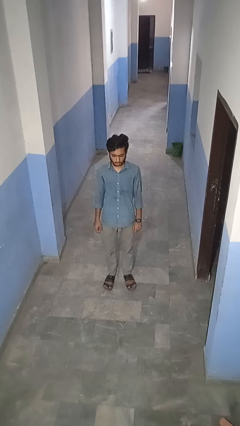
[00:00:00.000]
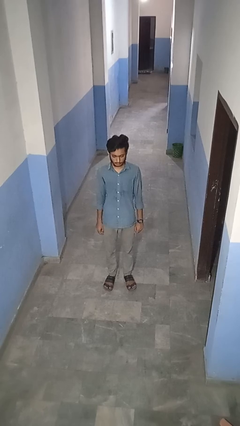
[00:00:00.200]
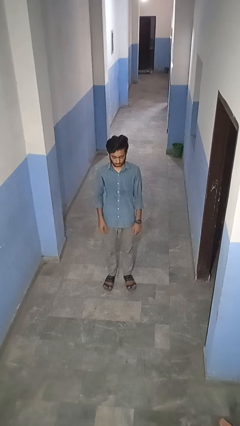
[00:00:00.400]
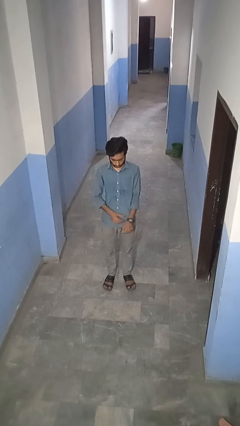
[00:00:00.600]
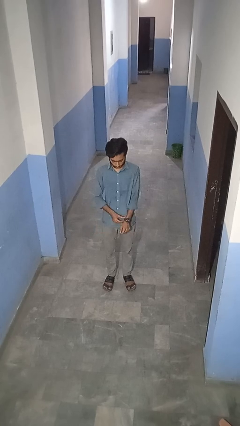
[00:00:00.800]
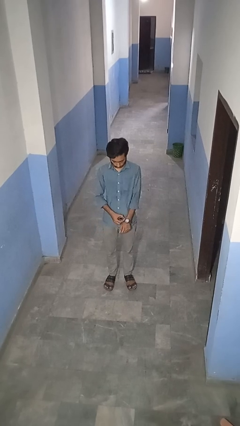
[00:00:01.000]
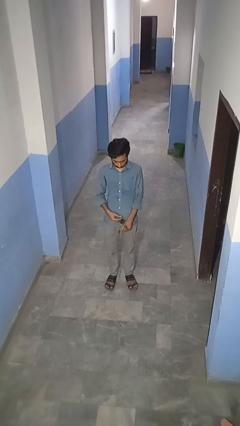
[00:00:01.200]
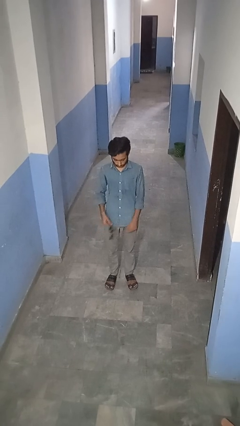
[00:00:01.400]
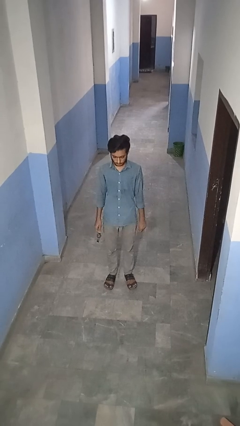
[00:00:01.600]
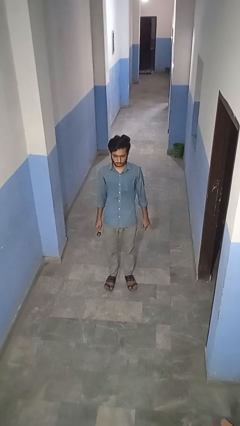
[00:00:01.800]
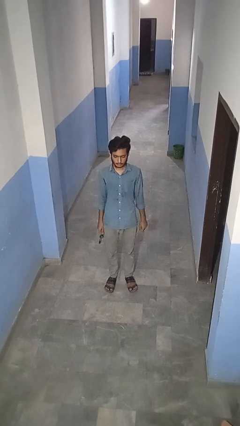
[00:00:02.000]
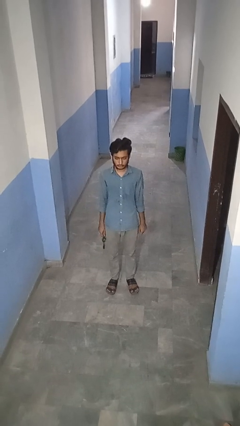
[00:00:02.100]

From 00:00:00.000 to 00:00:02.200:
person takes off wristwatch

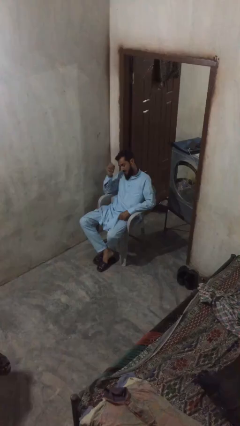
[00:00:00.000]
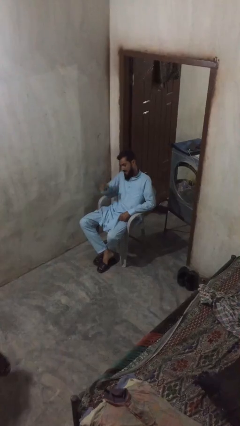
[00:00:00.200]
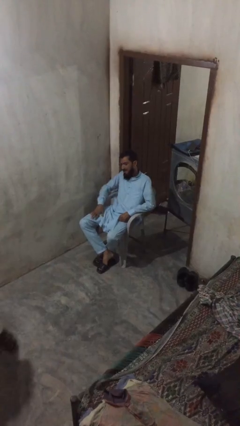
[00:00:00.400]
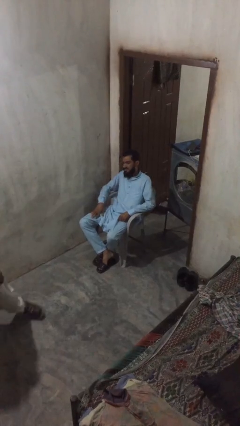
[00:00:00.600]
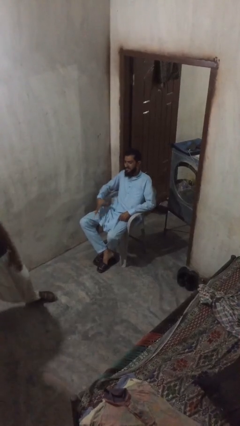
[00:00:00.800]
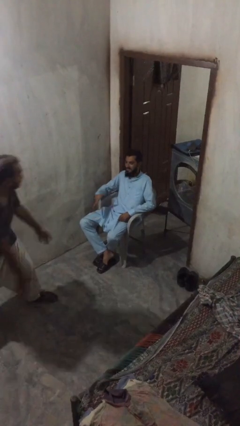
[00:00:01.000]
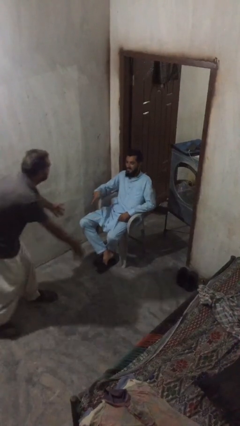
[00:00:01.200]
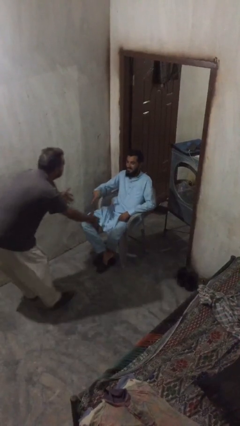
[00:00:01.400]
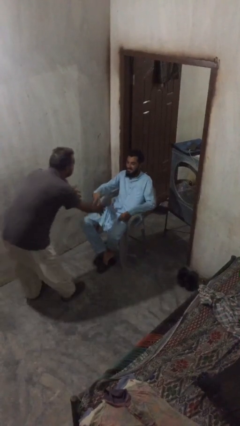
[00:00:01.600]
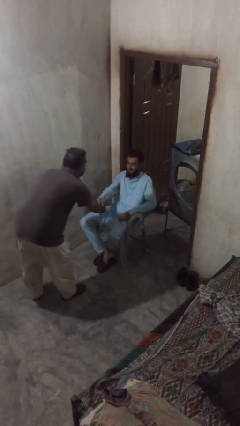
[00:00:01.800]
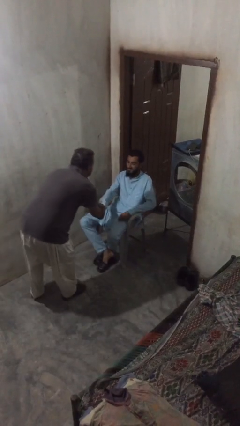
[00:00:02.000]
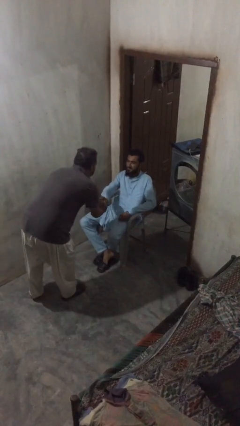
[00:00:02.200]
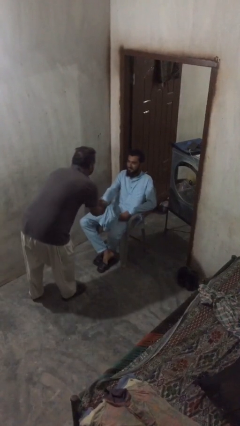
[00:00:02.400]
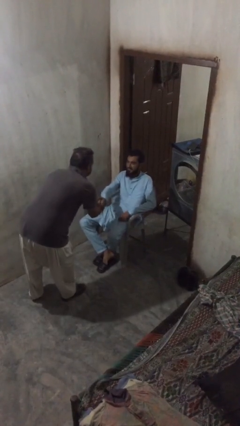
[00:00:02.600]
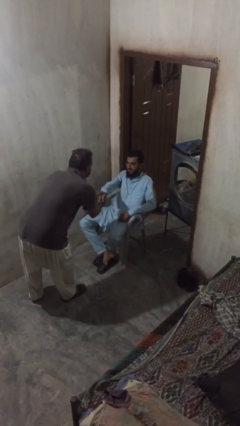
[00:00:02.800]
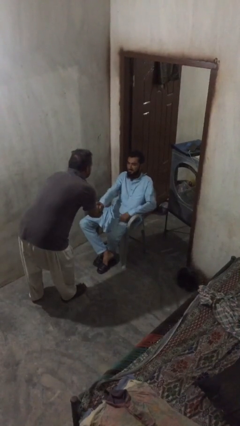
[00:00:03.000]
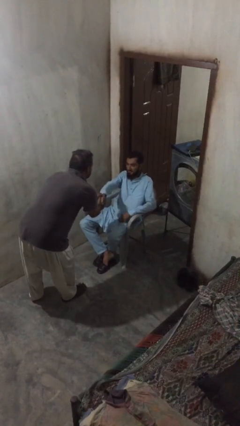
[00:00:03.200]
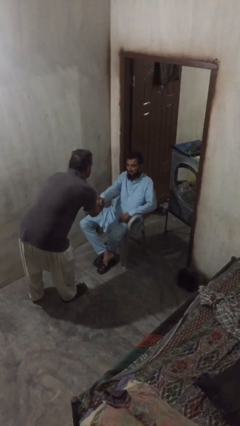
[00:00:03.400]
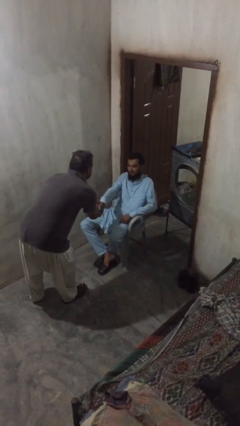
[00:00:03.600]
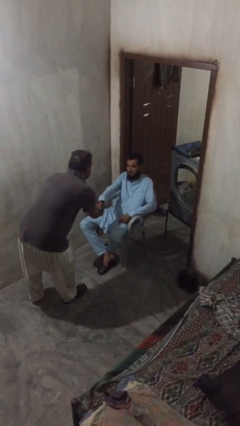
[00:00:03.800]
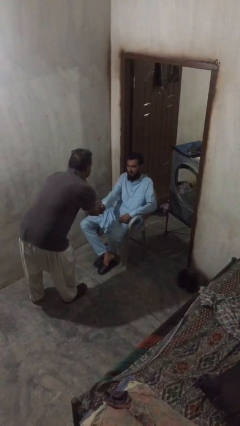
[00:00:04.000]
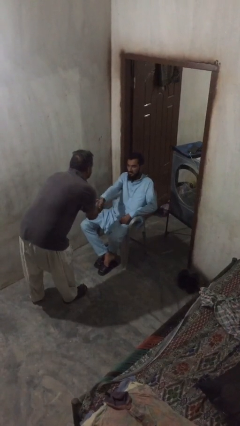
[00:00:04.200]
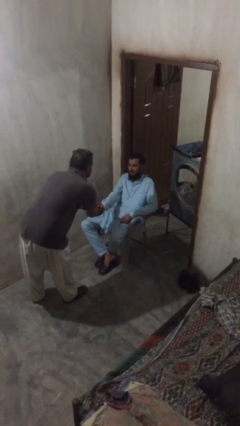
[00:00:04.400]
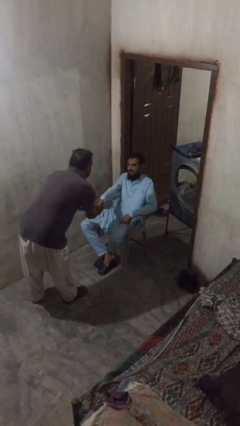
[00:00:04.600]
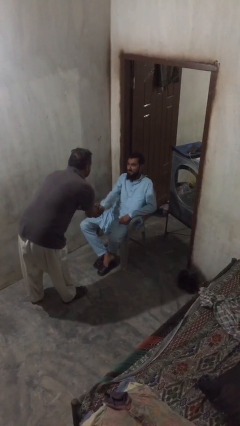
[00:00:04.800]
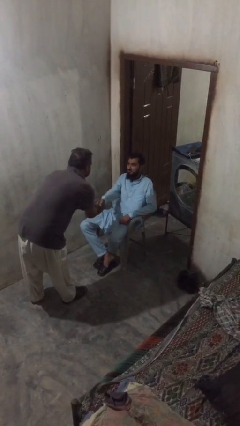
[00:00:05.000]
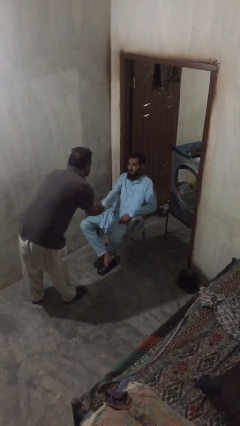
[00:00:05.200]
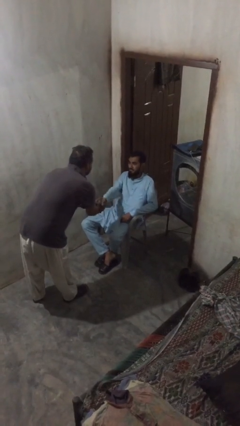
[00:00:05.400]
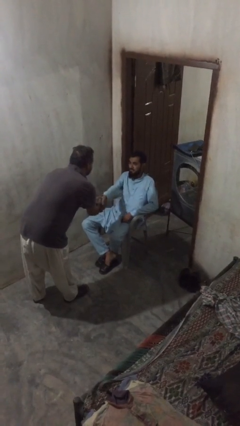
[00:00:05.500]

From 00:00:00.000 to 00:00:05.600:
person shakes hand

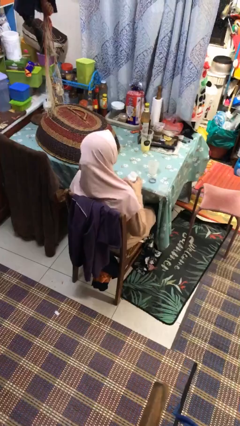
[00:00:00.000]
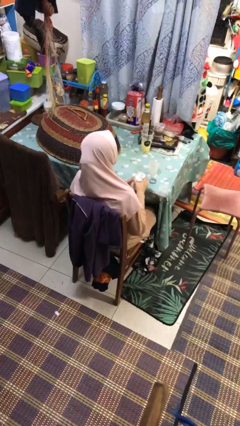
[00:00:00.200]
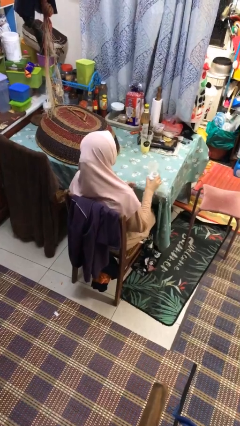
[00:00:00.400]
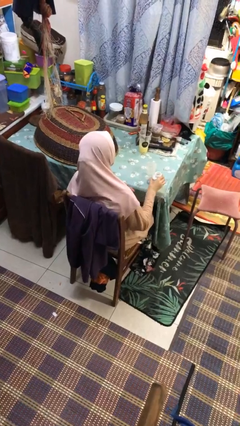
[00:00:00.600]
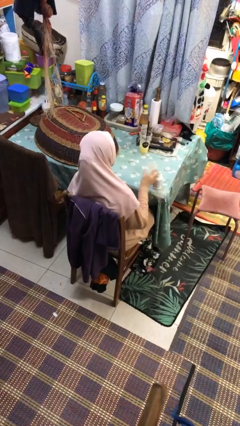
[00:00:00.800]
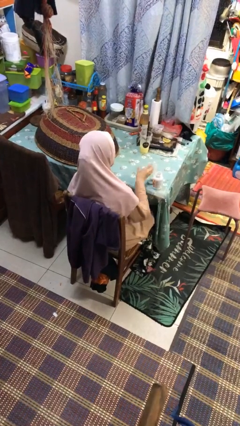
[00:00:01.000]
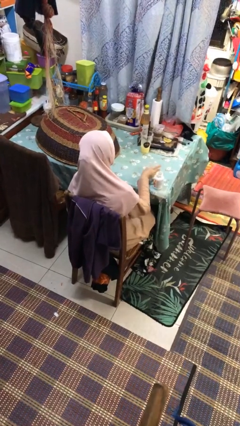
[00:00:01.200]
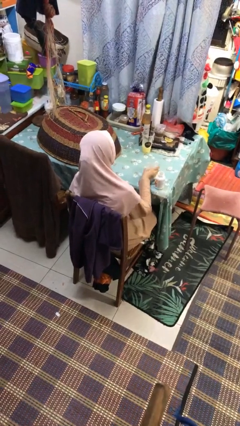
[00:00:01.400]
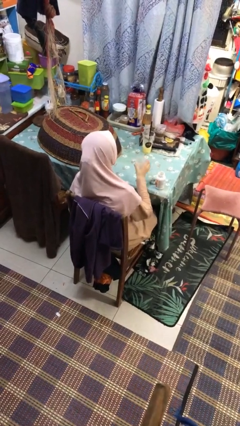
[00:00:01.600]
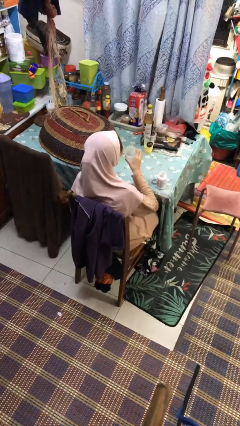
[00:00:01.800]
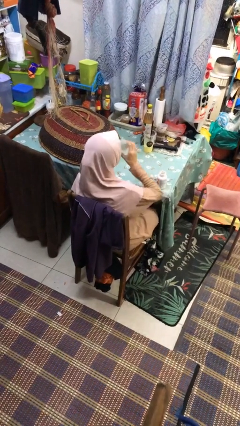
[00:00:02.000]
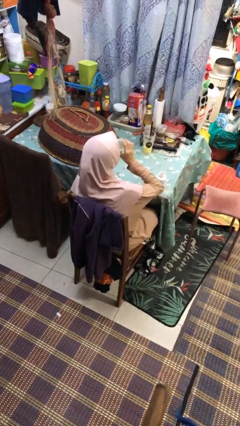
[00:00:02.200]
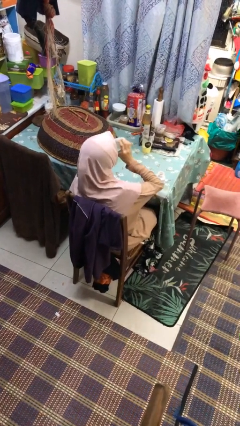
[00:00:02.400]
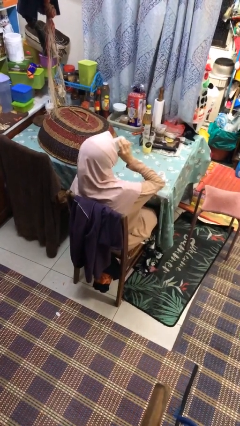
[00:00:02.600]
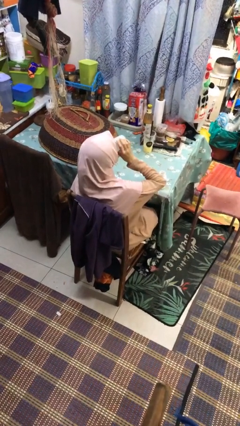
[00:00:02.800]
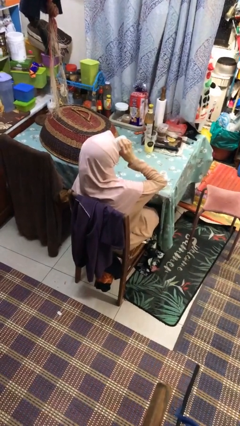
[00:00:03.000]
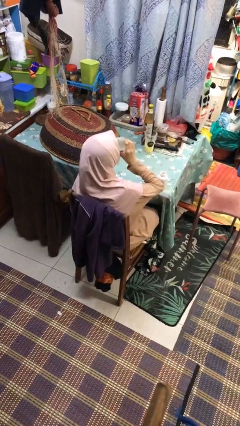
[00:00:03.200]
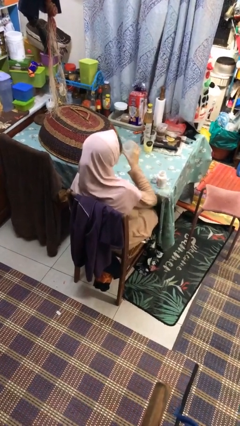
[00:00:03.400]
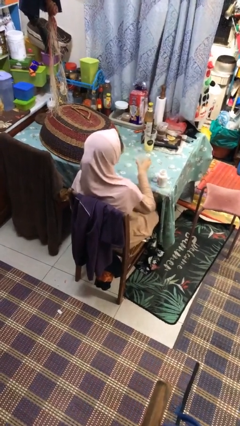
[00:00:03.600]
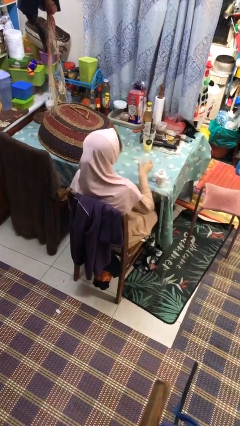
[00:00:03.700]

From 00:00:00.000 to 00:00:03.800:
person drinks from cup

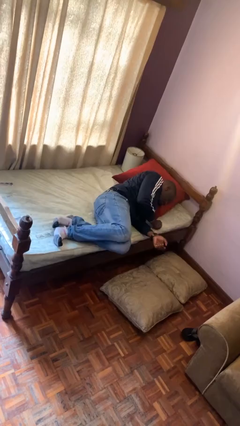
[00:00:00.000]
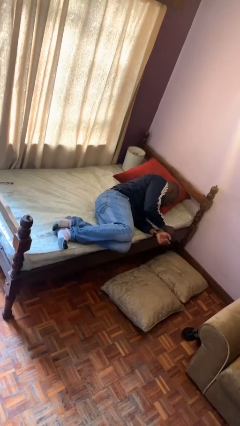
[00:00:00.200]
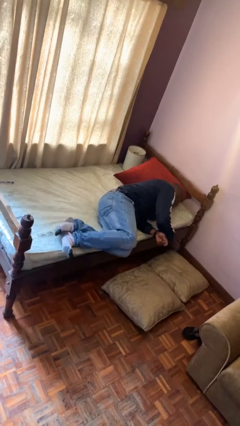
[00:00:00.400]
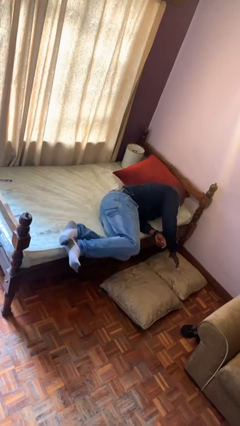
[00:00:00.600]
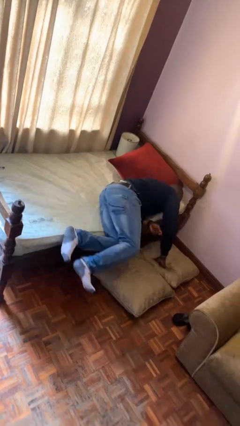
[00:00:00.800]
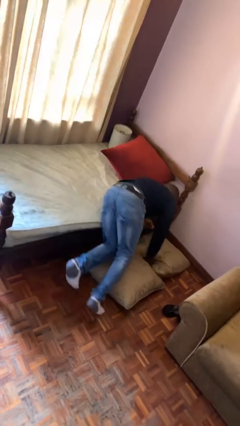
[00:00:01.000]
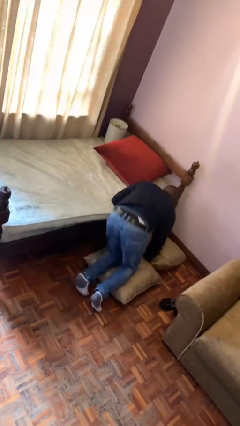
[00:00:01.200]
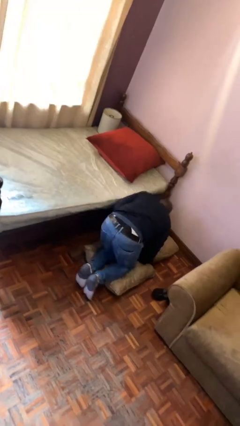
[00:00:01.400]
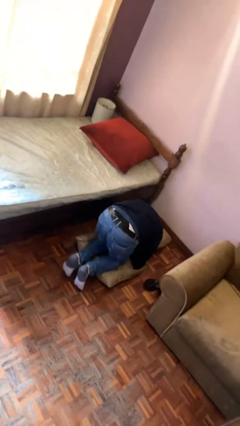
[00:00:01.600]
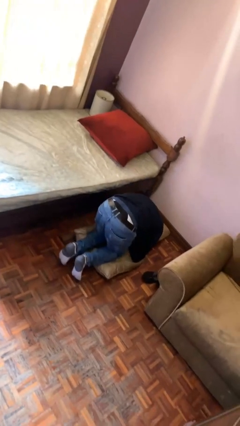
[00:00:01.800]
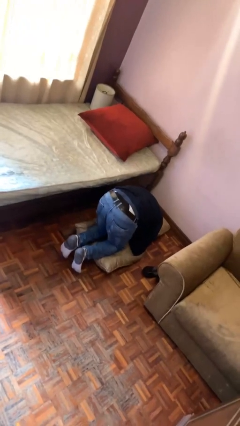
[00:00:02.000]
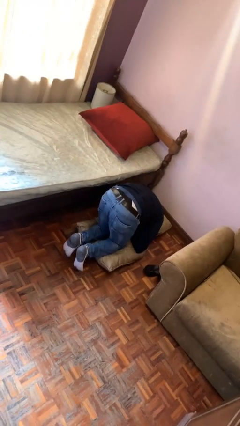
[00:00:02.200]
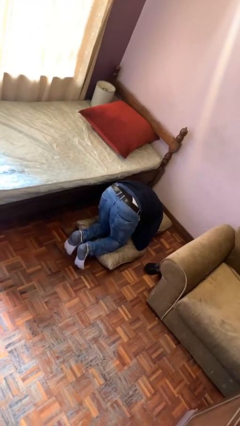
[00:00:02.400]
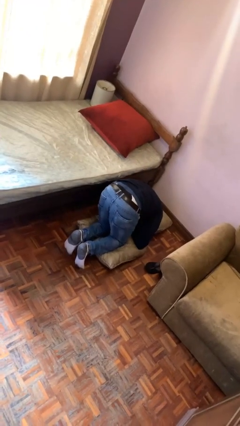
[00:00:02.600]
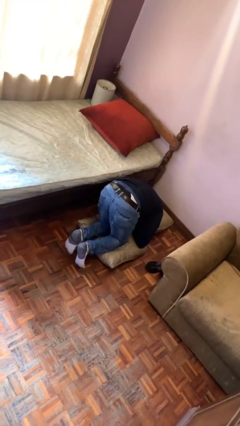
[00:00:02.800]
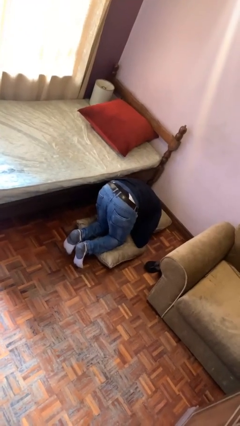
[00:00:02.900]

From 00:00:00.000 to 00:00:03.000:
person falls from bed

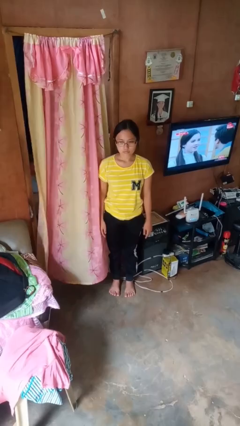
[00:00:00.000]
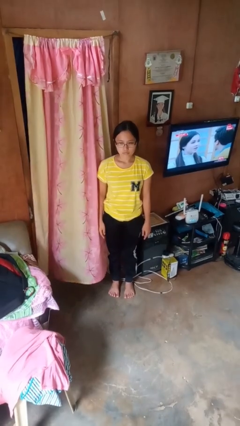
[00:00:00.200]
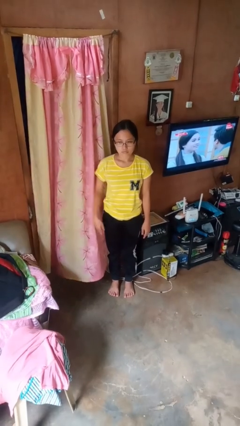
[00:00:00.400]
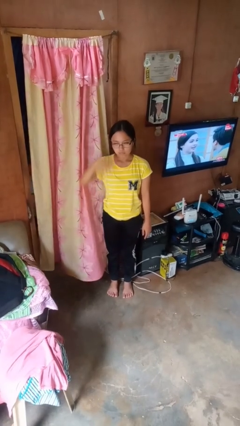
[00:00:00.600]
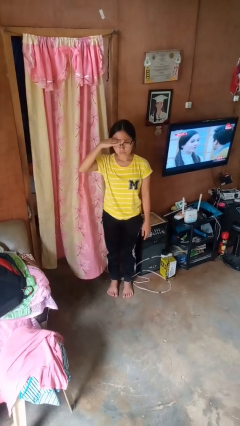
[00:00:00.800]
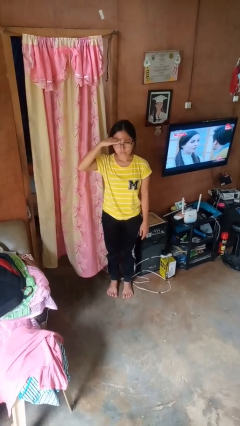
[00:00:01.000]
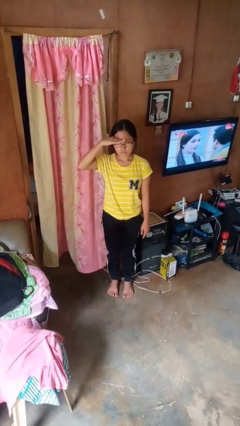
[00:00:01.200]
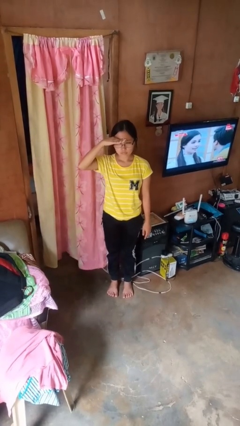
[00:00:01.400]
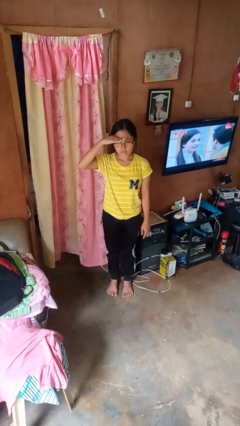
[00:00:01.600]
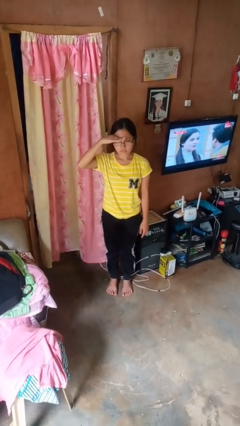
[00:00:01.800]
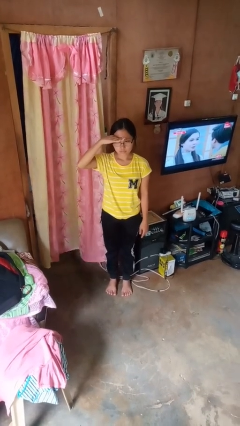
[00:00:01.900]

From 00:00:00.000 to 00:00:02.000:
person salutes

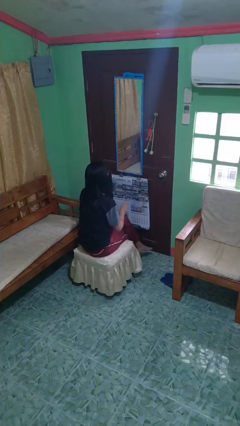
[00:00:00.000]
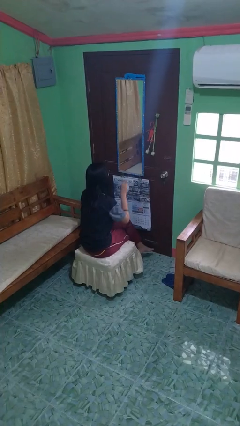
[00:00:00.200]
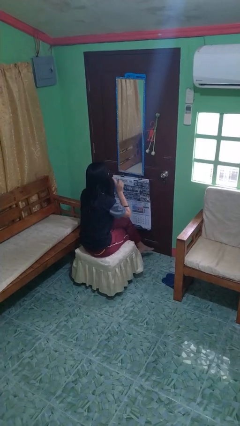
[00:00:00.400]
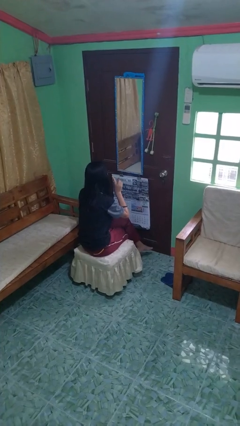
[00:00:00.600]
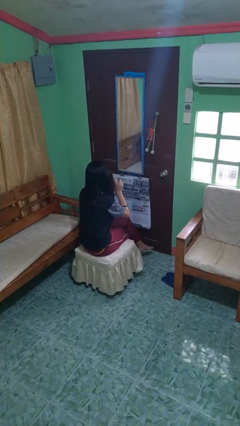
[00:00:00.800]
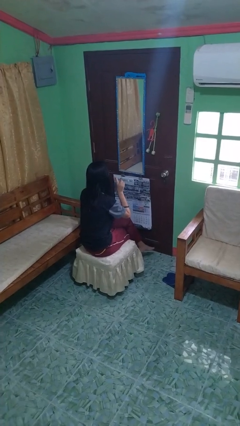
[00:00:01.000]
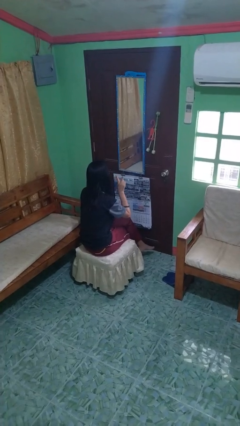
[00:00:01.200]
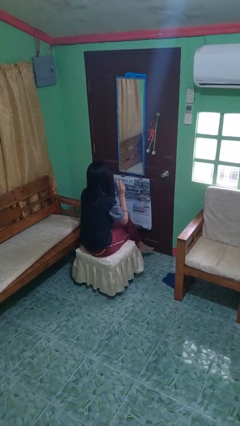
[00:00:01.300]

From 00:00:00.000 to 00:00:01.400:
person gestures peace
